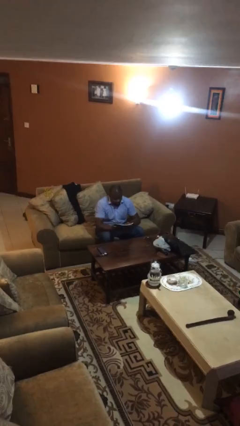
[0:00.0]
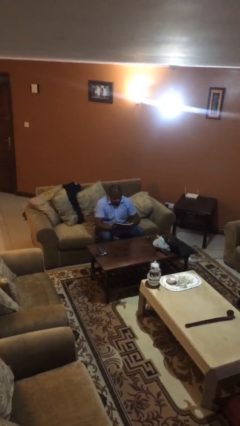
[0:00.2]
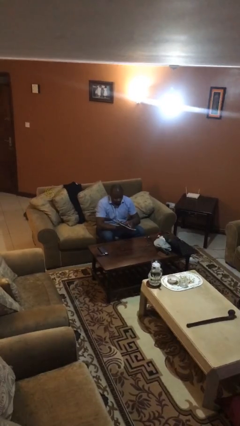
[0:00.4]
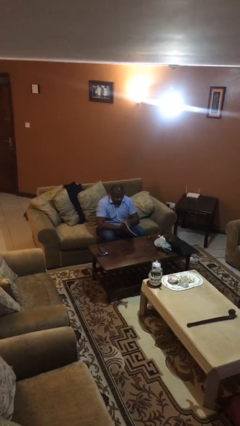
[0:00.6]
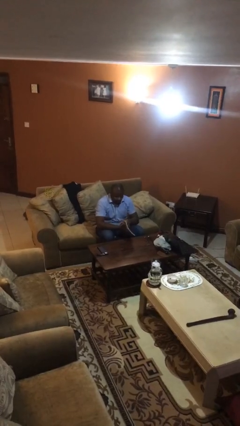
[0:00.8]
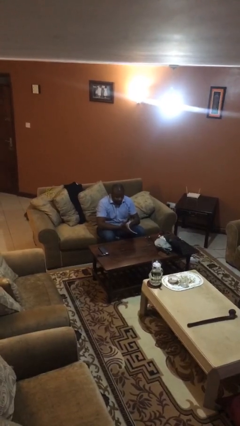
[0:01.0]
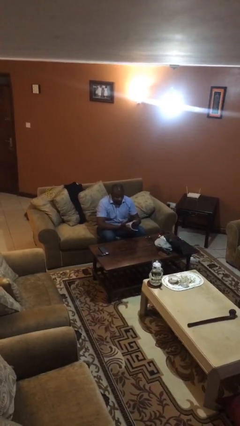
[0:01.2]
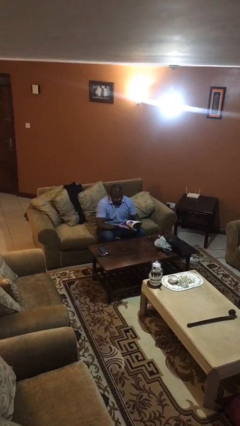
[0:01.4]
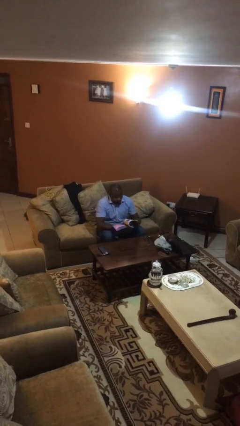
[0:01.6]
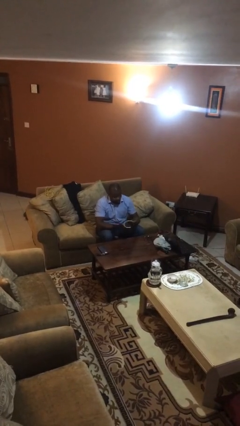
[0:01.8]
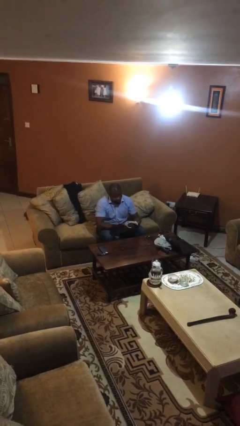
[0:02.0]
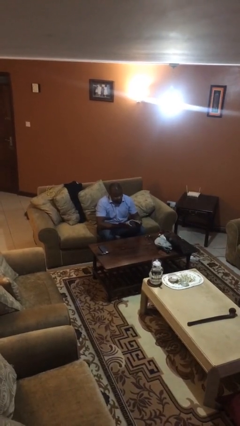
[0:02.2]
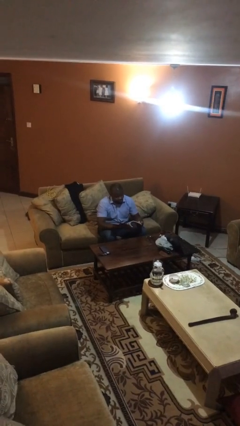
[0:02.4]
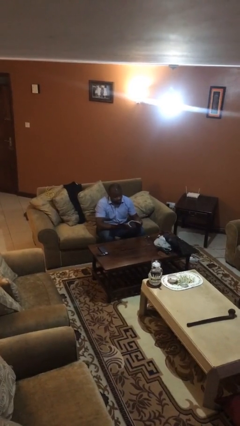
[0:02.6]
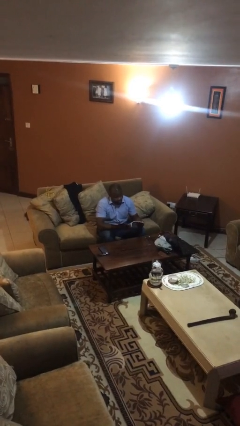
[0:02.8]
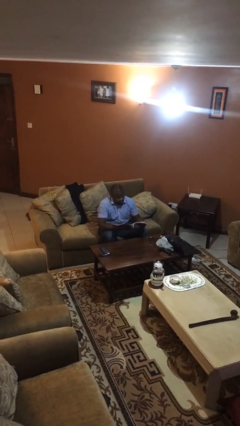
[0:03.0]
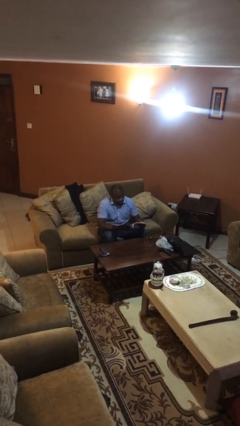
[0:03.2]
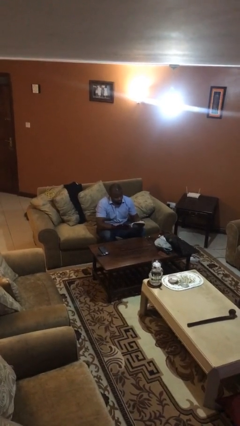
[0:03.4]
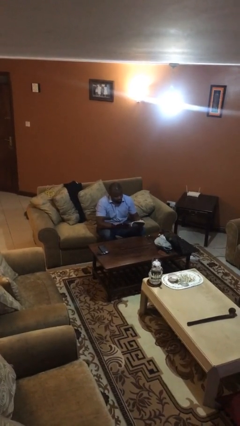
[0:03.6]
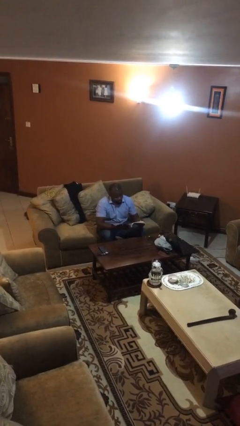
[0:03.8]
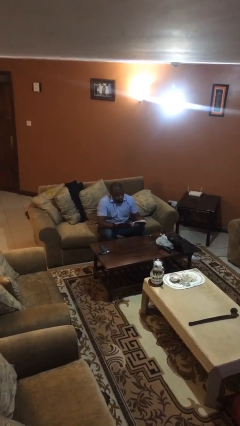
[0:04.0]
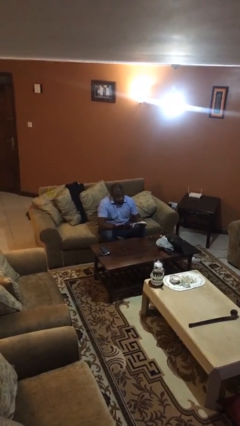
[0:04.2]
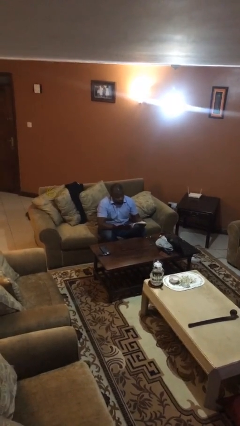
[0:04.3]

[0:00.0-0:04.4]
person reads document

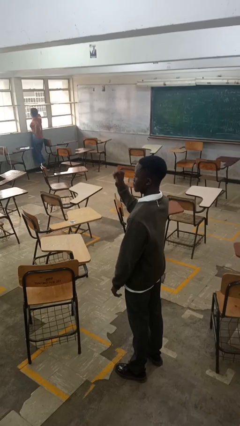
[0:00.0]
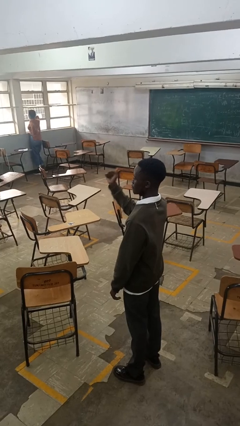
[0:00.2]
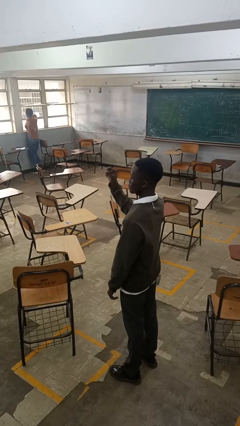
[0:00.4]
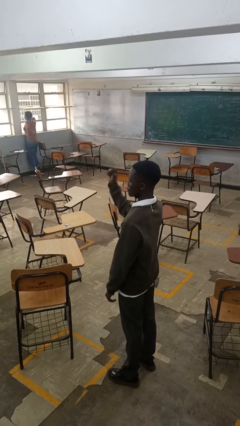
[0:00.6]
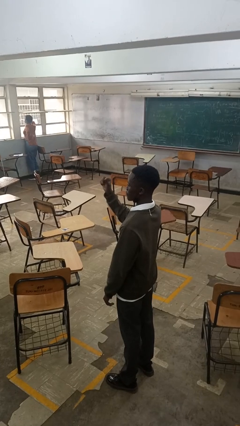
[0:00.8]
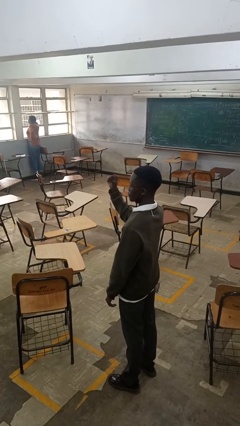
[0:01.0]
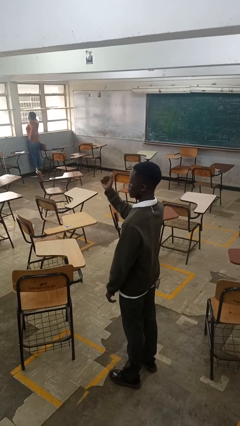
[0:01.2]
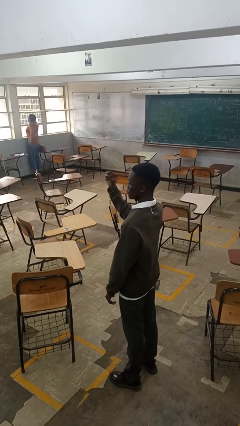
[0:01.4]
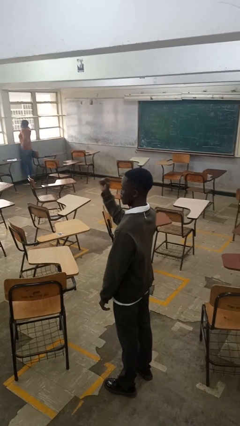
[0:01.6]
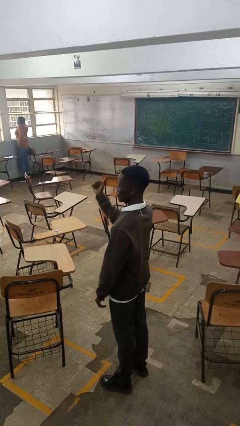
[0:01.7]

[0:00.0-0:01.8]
person snaps fingers

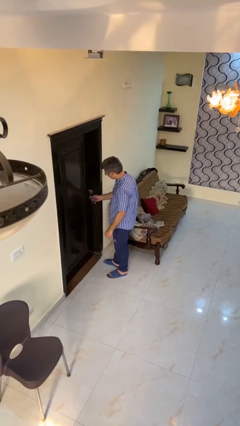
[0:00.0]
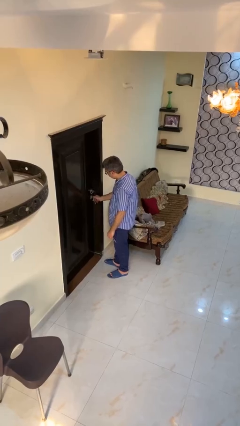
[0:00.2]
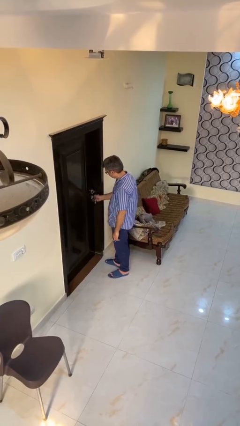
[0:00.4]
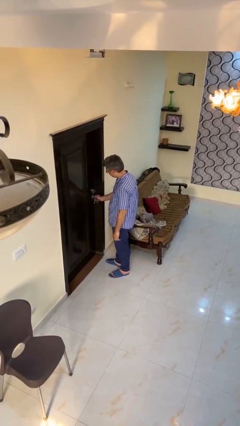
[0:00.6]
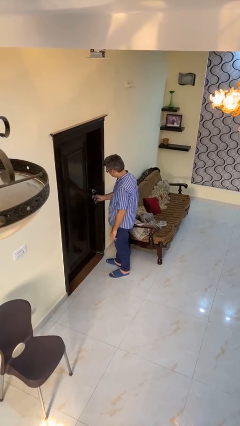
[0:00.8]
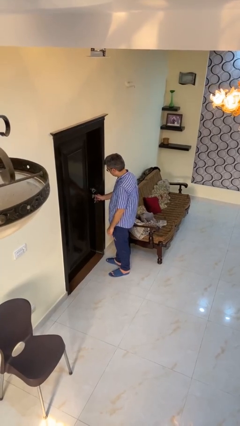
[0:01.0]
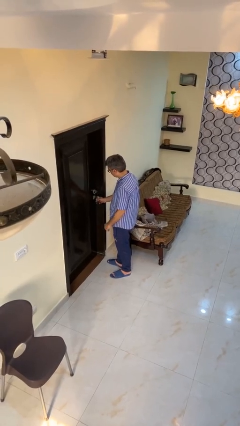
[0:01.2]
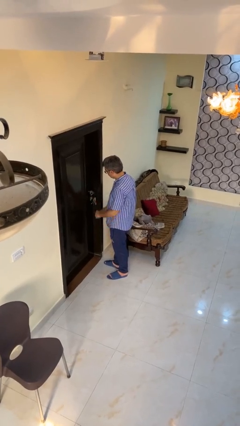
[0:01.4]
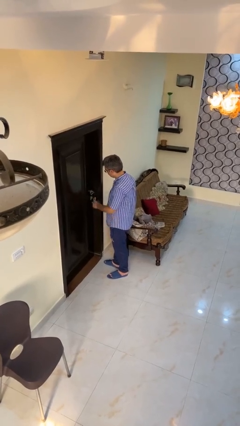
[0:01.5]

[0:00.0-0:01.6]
person unlocks door with keys

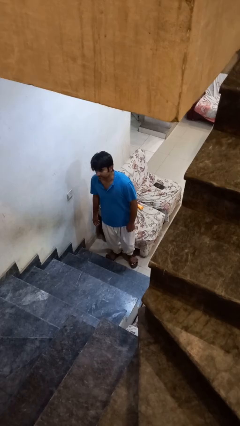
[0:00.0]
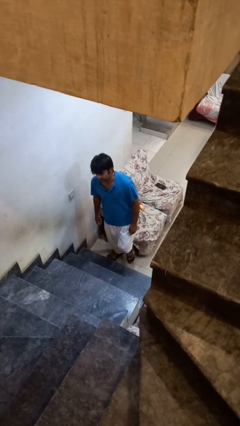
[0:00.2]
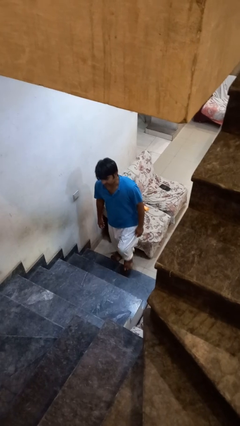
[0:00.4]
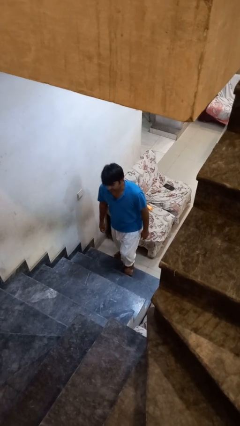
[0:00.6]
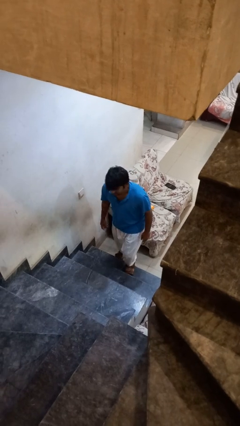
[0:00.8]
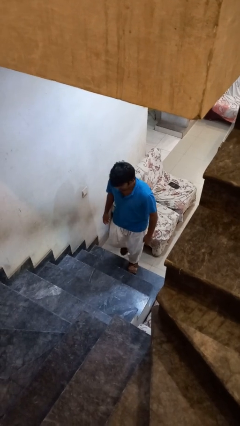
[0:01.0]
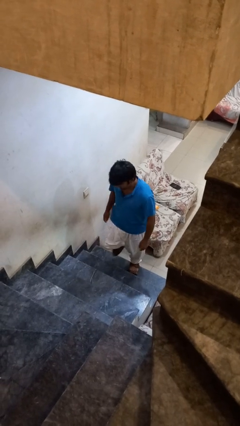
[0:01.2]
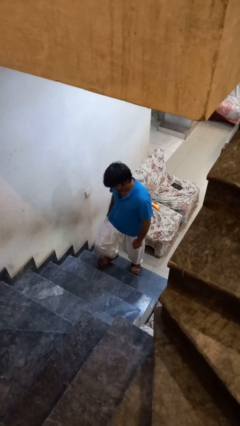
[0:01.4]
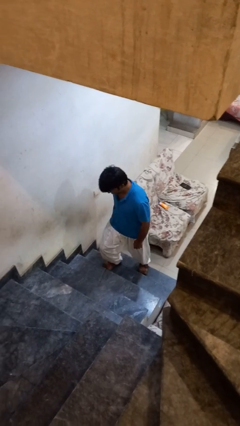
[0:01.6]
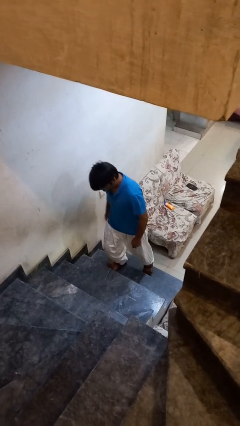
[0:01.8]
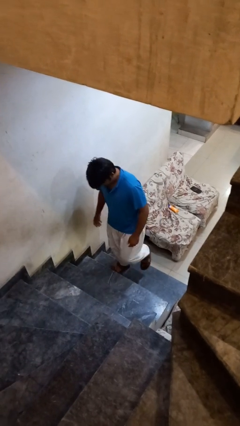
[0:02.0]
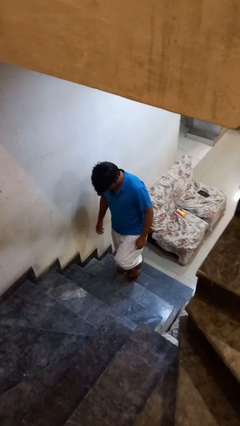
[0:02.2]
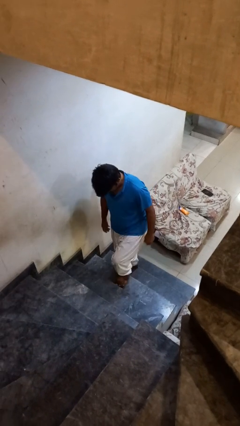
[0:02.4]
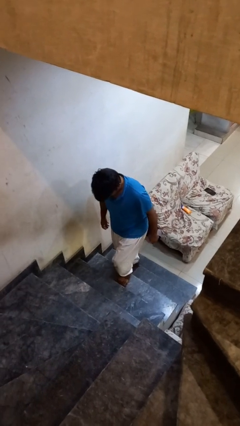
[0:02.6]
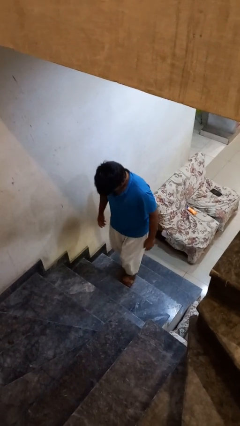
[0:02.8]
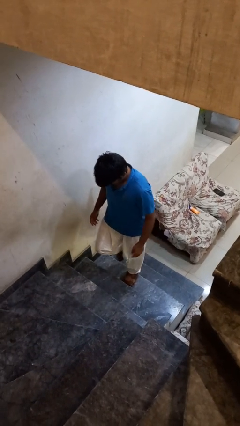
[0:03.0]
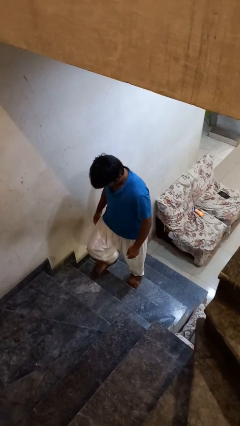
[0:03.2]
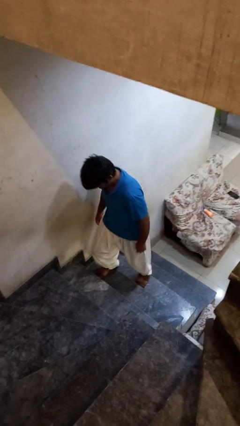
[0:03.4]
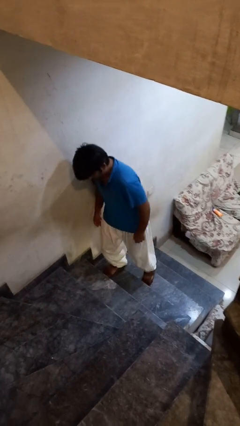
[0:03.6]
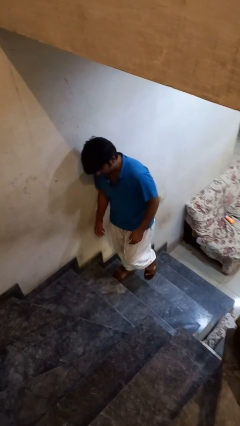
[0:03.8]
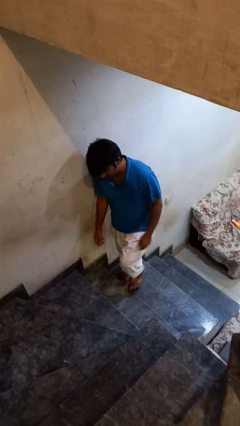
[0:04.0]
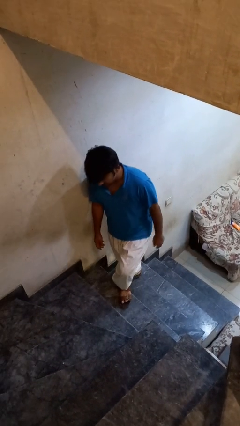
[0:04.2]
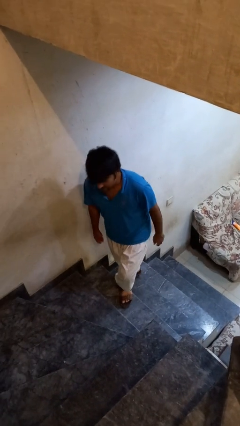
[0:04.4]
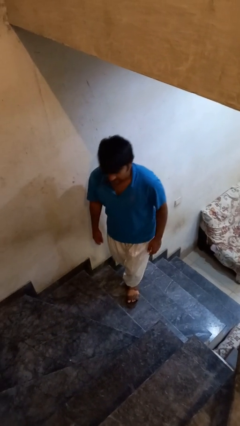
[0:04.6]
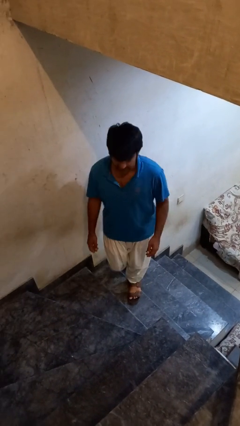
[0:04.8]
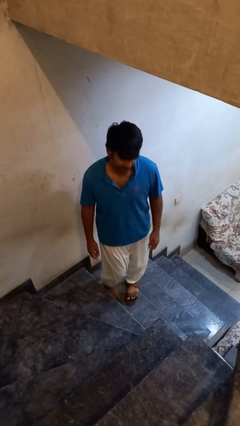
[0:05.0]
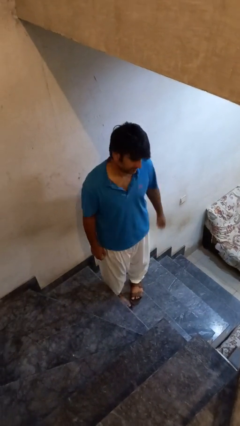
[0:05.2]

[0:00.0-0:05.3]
person climbs up stairs

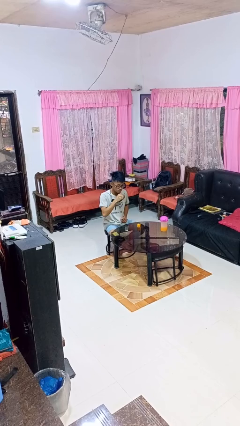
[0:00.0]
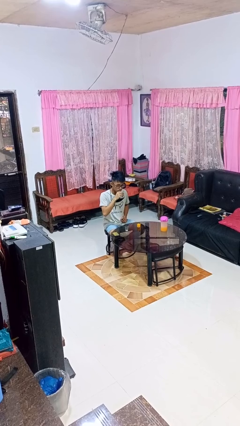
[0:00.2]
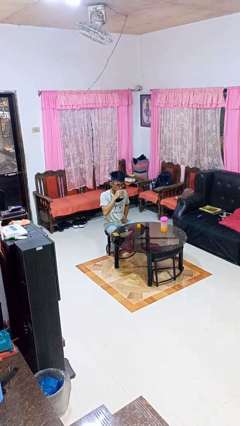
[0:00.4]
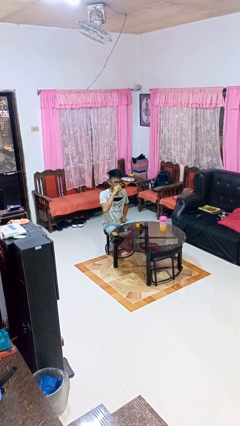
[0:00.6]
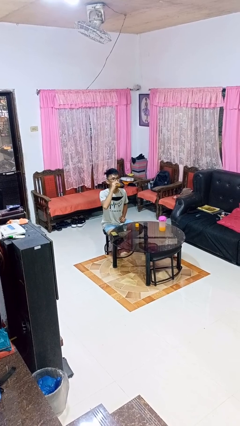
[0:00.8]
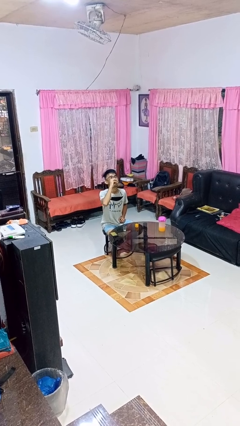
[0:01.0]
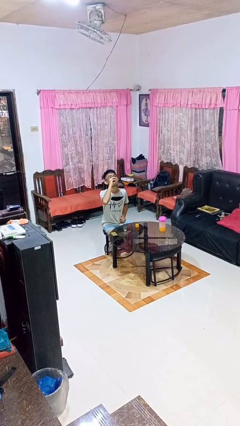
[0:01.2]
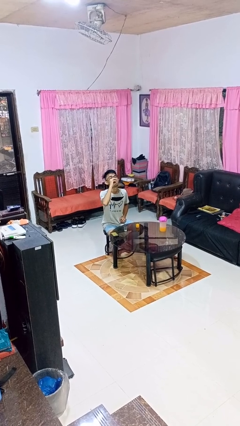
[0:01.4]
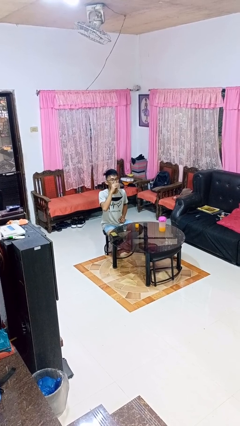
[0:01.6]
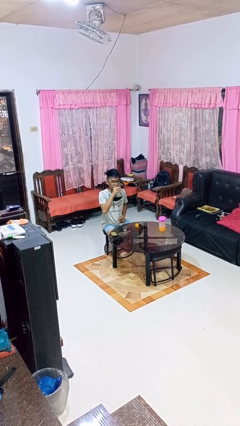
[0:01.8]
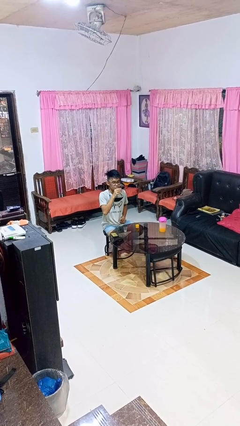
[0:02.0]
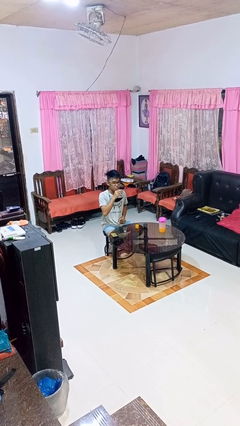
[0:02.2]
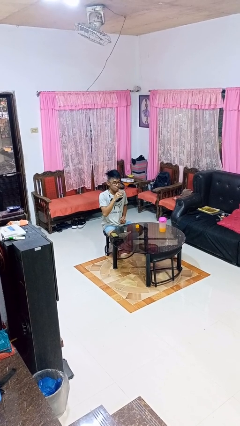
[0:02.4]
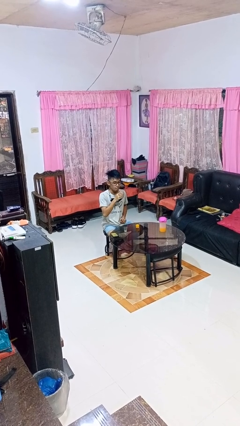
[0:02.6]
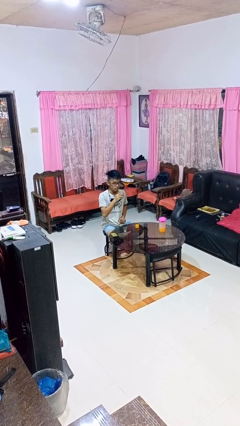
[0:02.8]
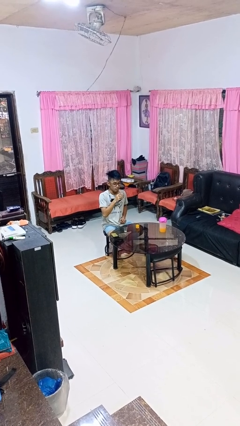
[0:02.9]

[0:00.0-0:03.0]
person drinks from shotglass

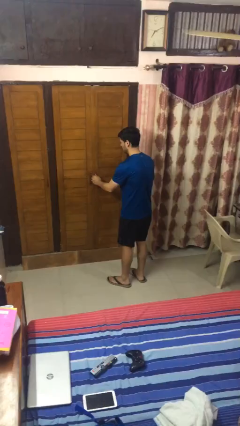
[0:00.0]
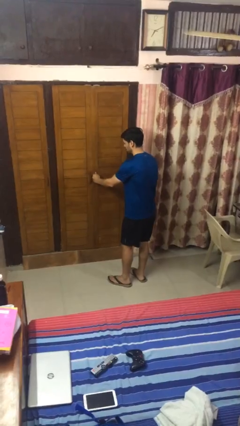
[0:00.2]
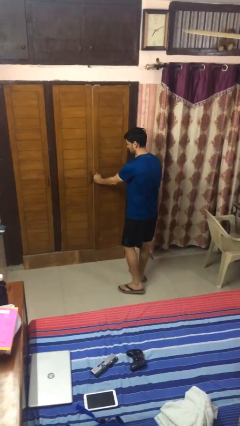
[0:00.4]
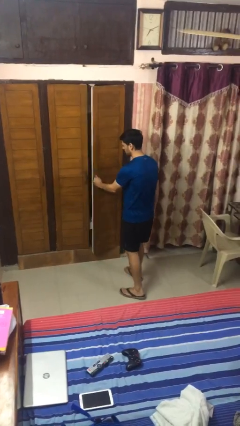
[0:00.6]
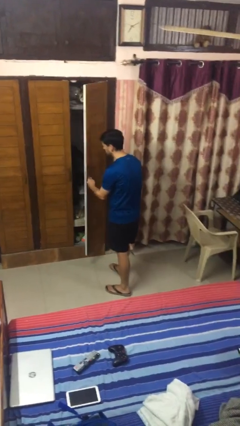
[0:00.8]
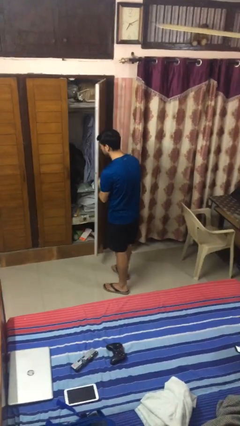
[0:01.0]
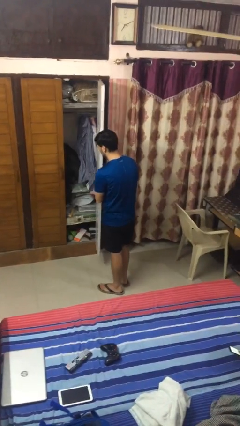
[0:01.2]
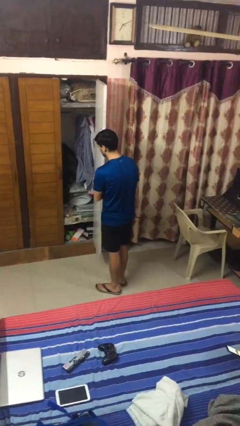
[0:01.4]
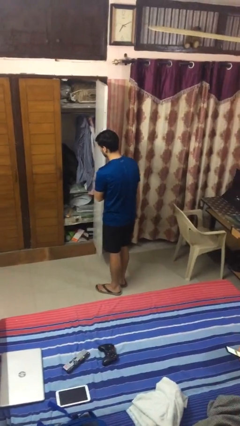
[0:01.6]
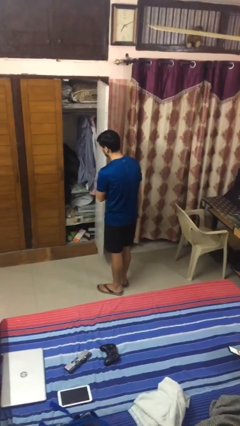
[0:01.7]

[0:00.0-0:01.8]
person opens facility door
